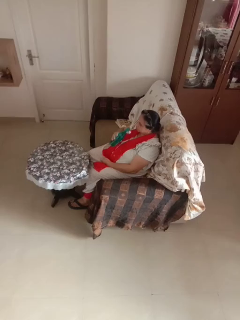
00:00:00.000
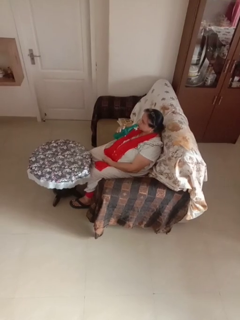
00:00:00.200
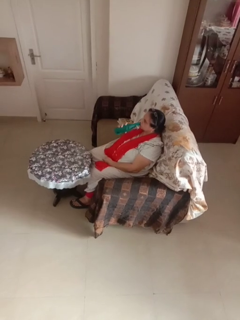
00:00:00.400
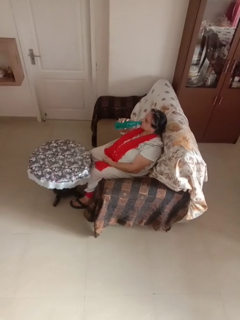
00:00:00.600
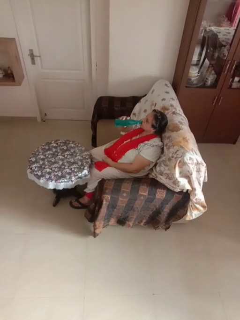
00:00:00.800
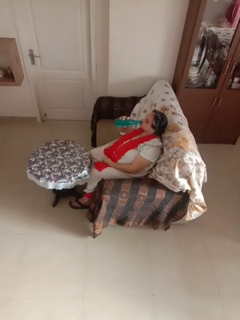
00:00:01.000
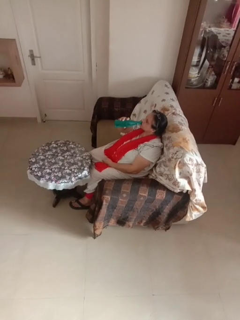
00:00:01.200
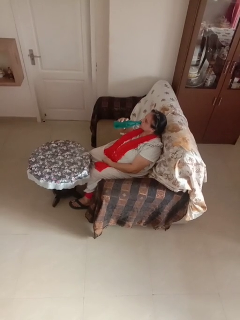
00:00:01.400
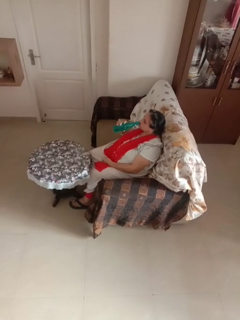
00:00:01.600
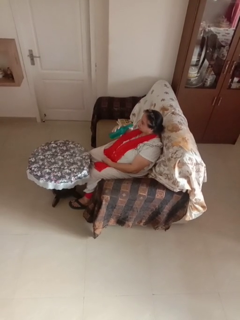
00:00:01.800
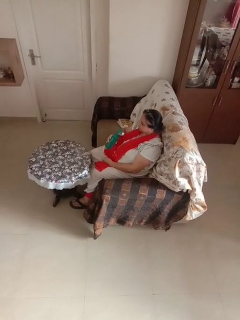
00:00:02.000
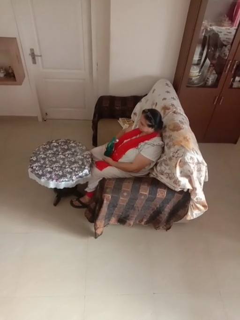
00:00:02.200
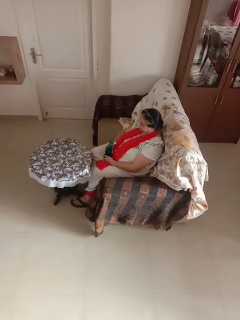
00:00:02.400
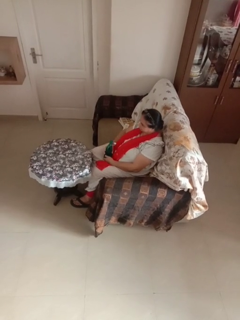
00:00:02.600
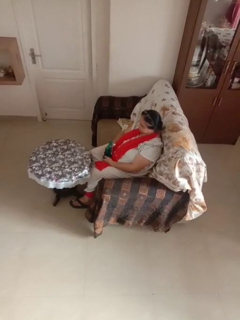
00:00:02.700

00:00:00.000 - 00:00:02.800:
person drinks from bottle

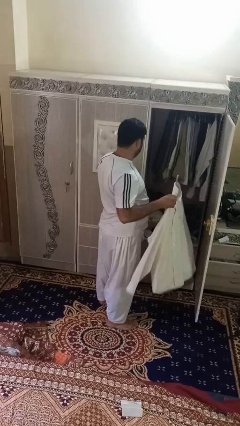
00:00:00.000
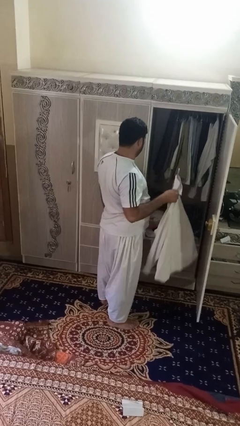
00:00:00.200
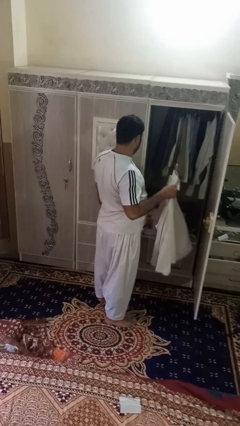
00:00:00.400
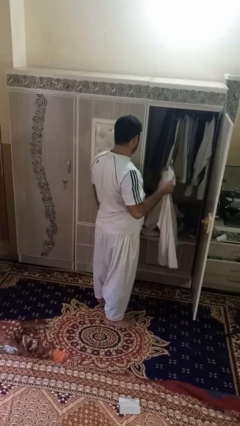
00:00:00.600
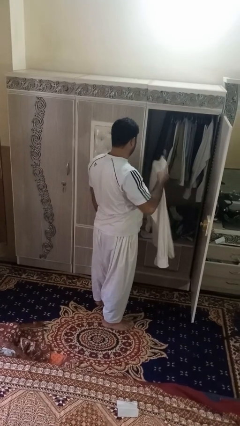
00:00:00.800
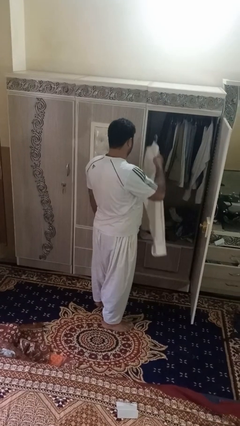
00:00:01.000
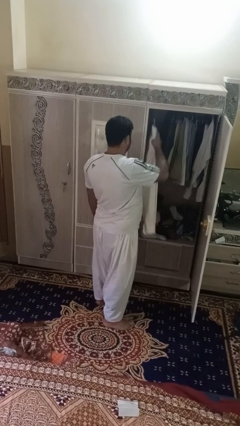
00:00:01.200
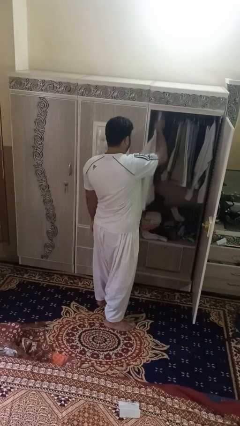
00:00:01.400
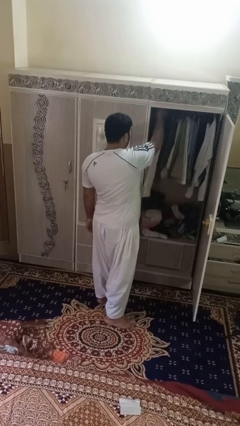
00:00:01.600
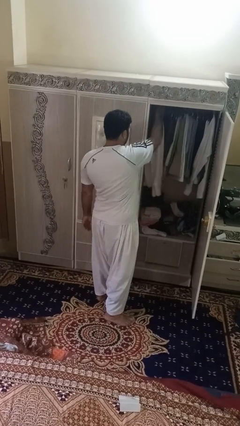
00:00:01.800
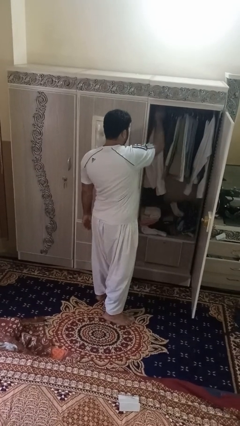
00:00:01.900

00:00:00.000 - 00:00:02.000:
person puts clothes into closet

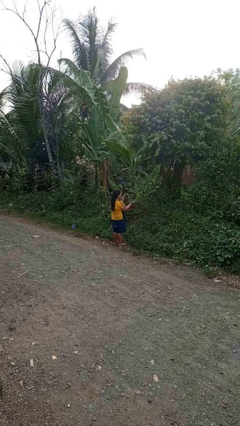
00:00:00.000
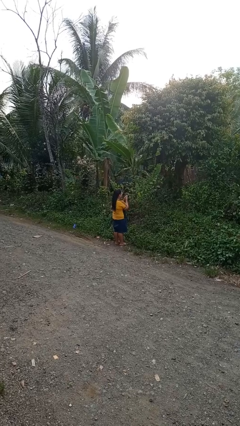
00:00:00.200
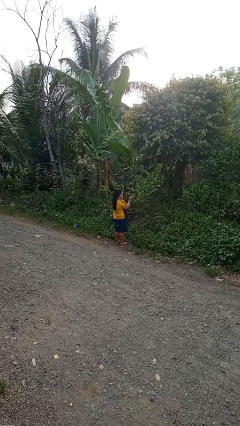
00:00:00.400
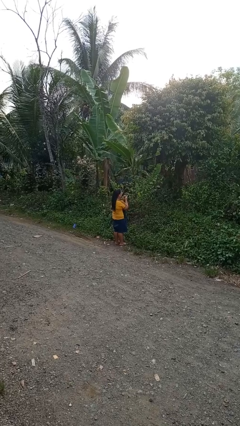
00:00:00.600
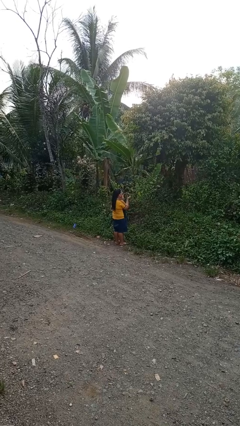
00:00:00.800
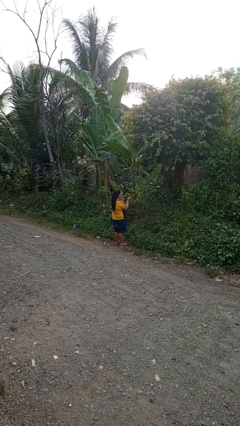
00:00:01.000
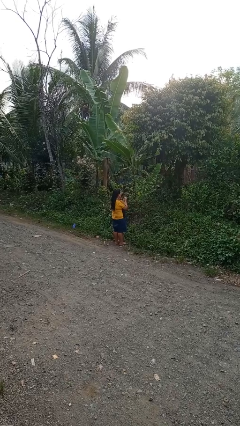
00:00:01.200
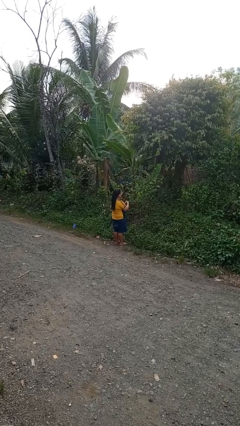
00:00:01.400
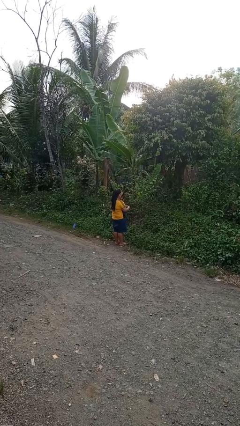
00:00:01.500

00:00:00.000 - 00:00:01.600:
person claps hands

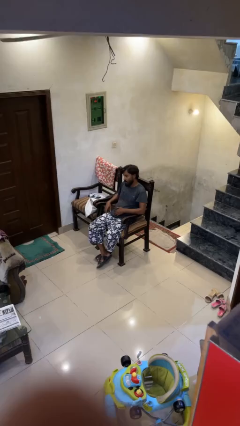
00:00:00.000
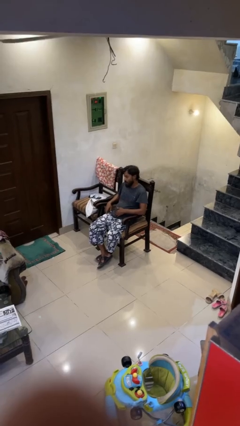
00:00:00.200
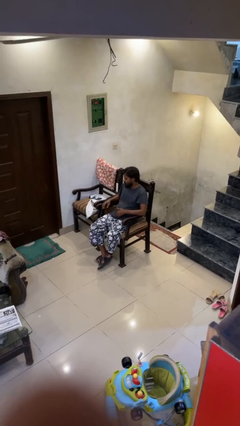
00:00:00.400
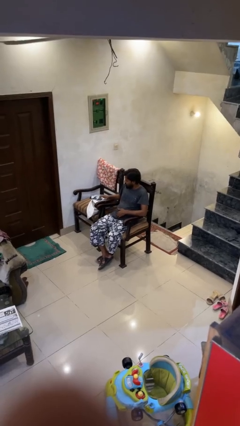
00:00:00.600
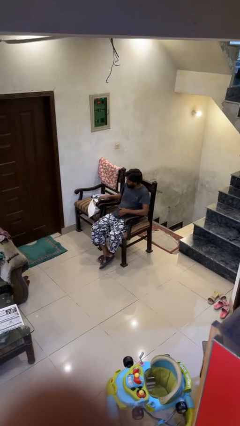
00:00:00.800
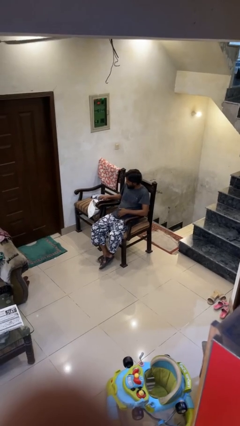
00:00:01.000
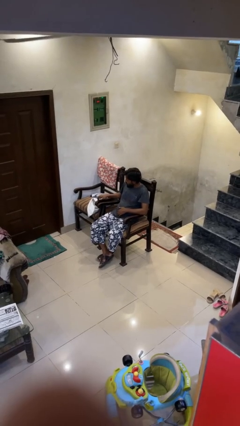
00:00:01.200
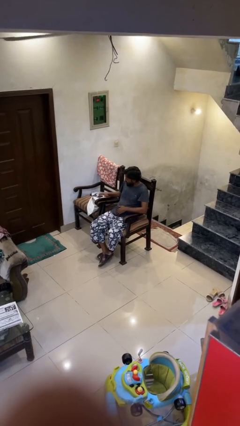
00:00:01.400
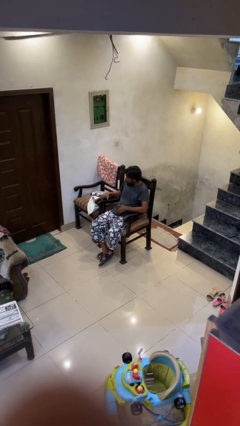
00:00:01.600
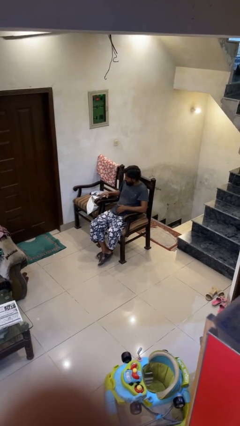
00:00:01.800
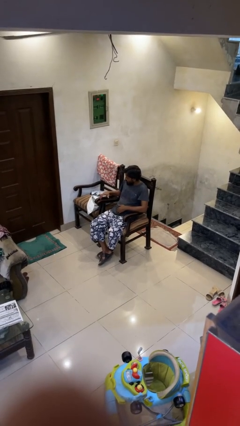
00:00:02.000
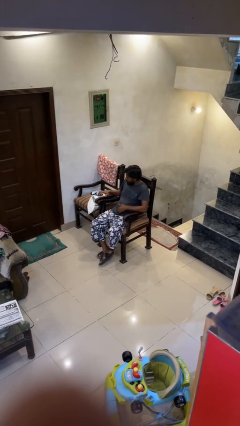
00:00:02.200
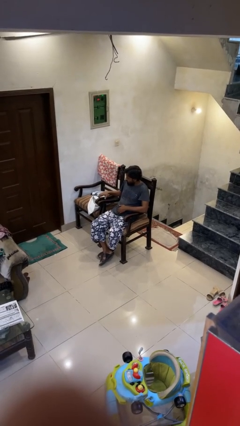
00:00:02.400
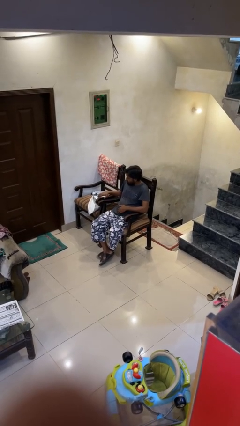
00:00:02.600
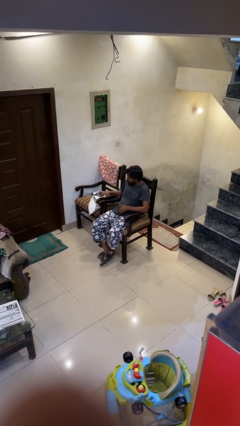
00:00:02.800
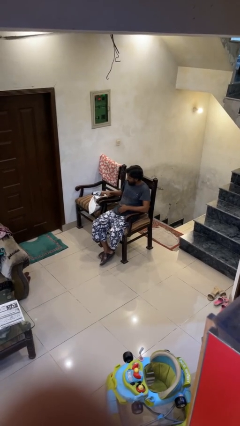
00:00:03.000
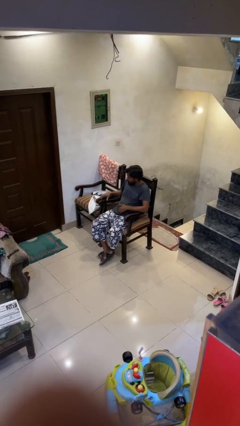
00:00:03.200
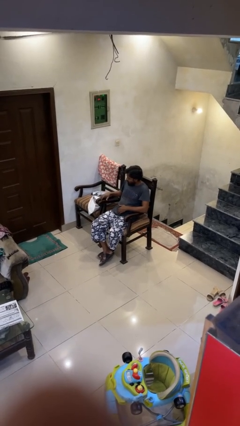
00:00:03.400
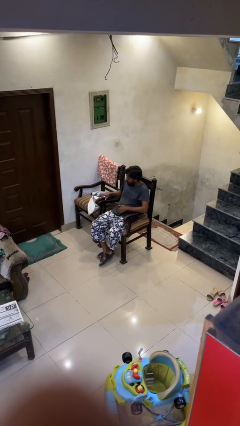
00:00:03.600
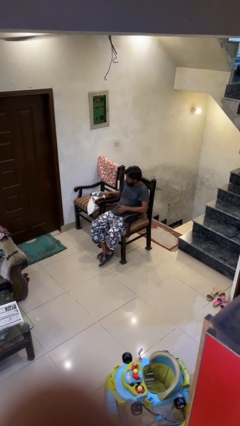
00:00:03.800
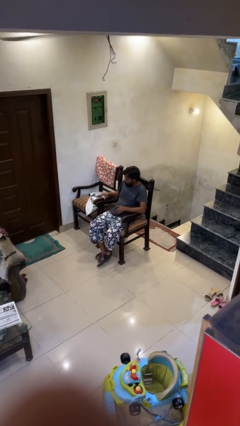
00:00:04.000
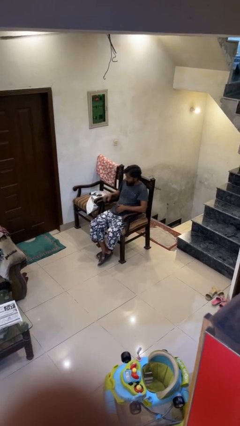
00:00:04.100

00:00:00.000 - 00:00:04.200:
person taps object with finger

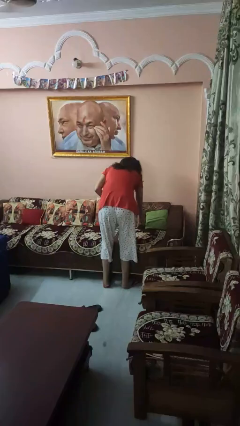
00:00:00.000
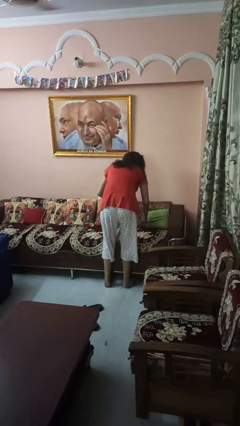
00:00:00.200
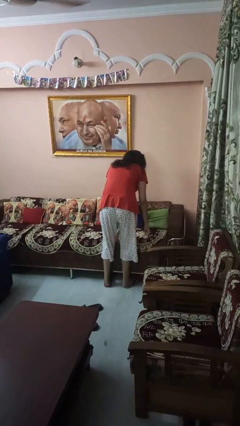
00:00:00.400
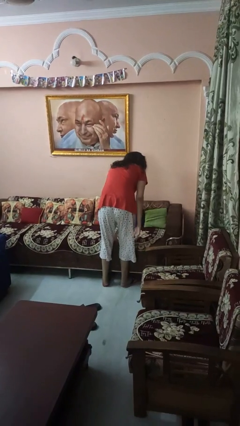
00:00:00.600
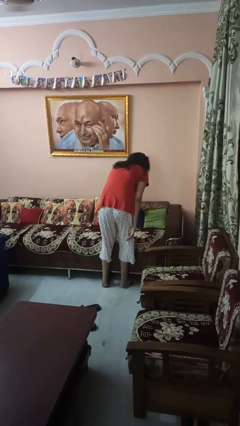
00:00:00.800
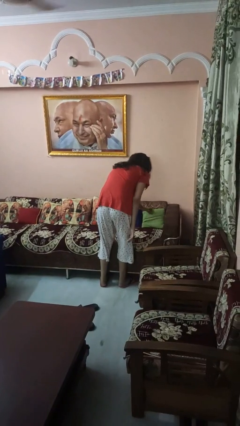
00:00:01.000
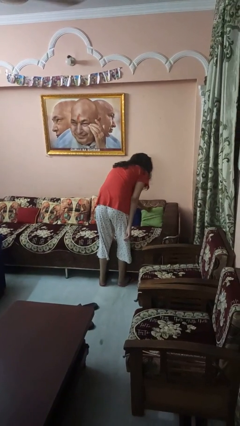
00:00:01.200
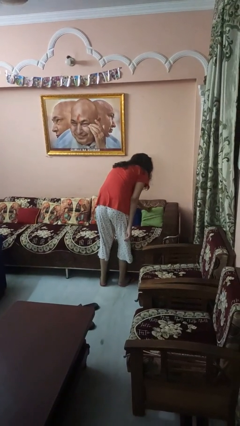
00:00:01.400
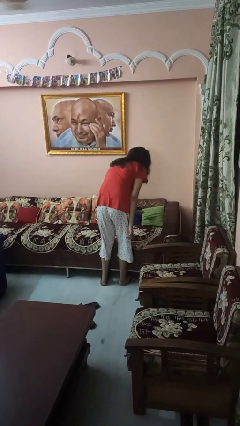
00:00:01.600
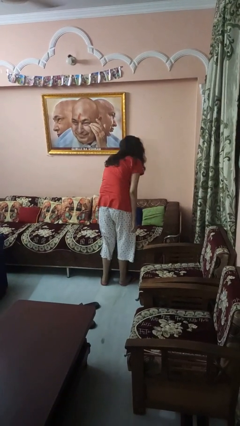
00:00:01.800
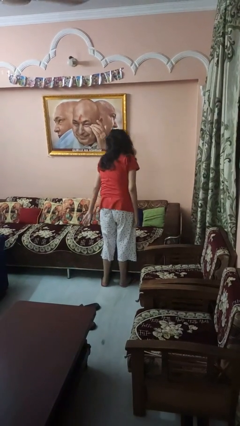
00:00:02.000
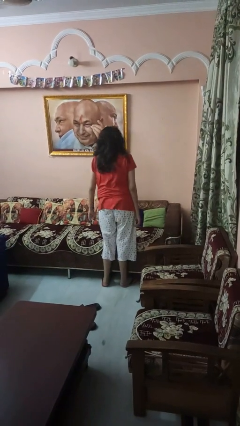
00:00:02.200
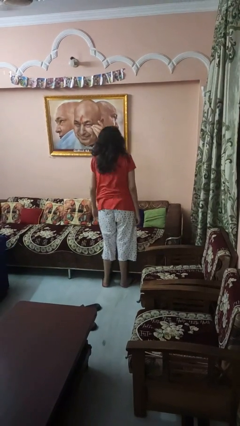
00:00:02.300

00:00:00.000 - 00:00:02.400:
person searches in couch

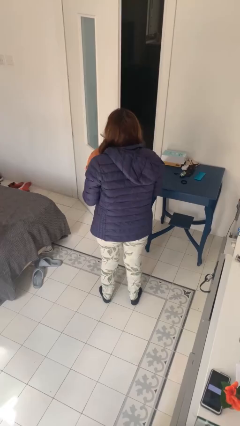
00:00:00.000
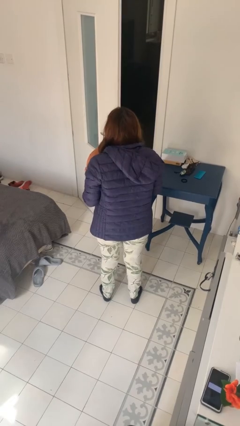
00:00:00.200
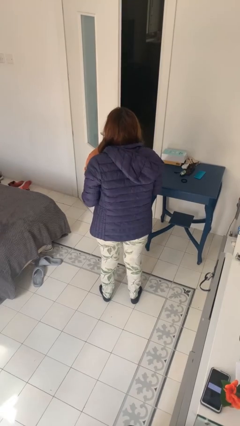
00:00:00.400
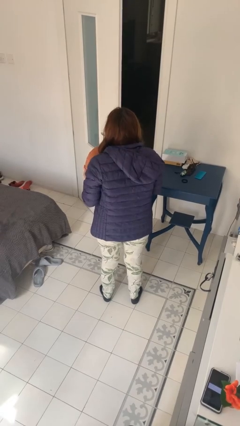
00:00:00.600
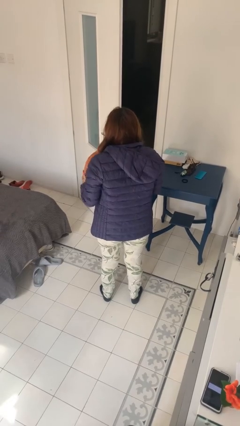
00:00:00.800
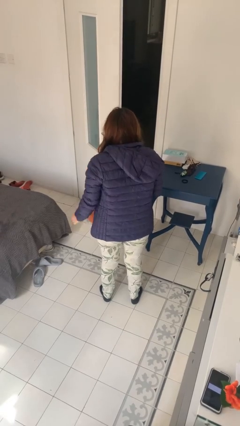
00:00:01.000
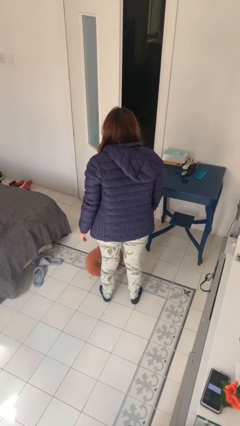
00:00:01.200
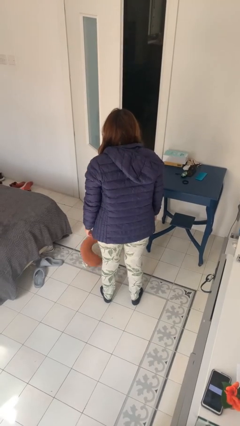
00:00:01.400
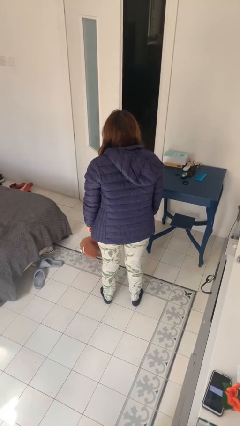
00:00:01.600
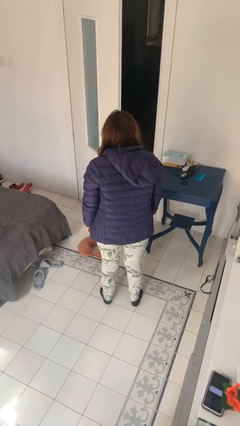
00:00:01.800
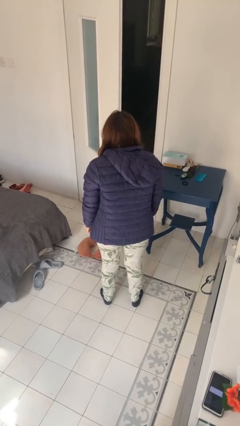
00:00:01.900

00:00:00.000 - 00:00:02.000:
person throws object into air

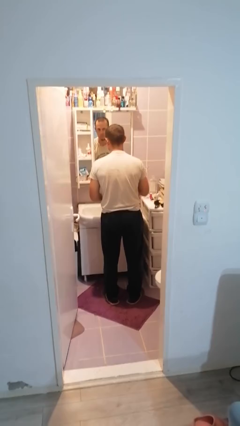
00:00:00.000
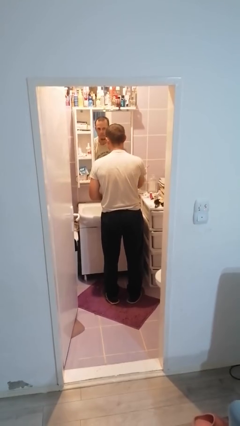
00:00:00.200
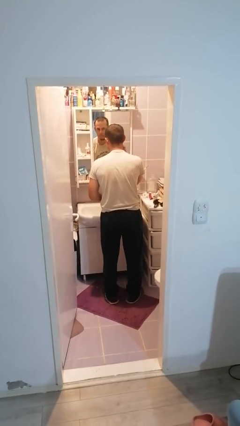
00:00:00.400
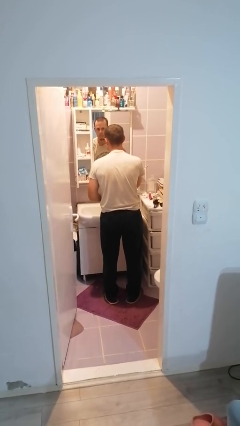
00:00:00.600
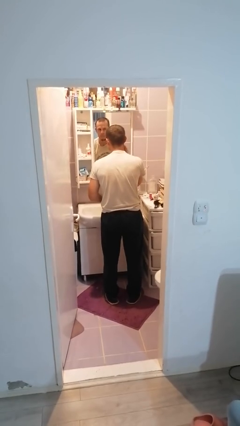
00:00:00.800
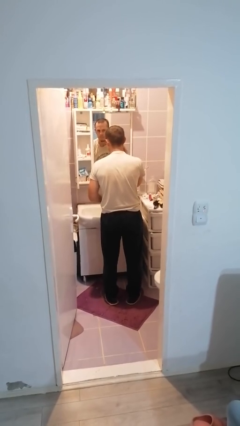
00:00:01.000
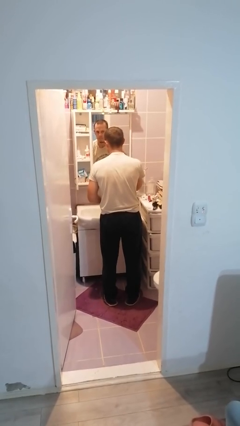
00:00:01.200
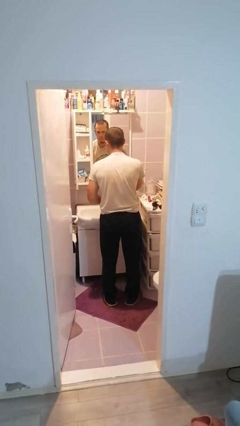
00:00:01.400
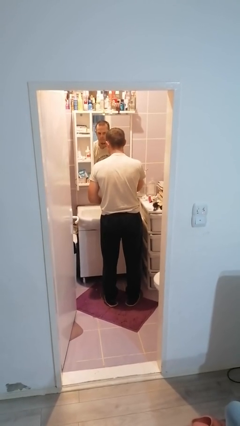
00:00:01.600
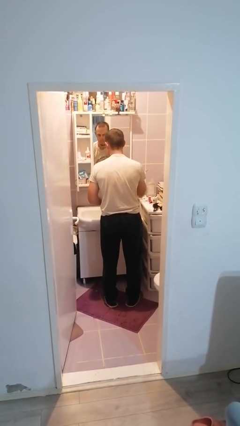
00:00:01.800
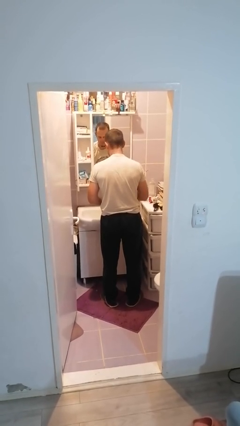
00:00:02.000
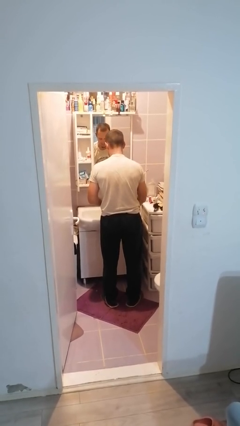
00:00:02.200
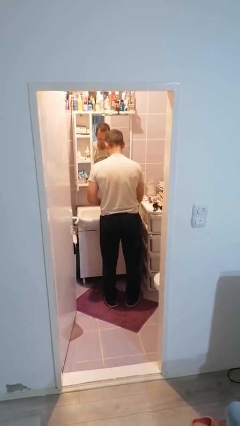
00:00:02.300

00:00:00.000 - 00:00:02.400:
person applies shaving cream

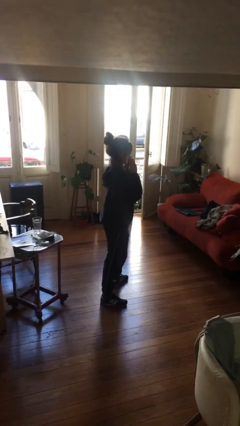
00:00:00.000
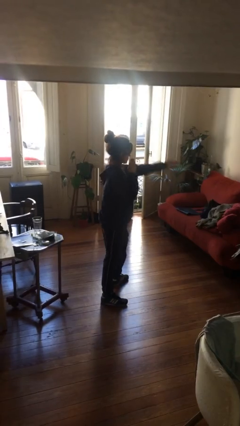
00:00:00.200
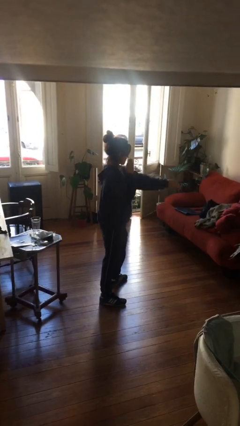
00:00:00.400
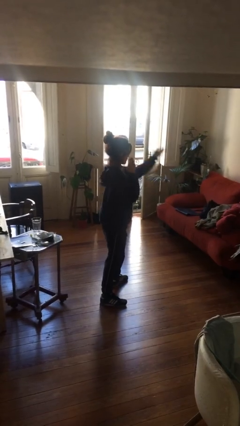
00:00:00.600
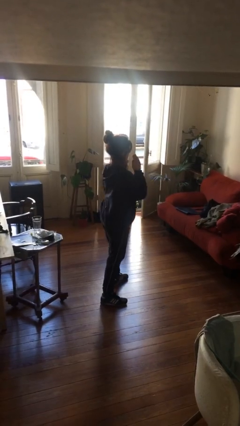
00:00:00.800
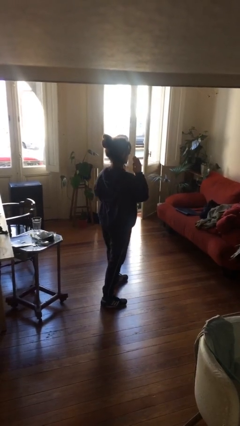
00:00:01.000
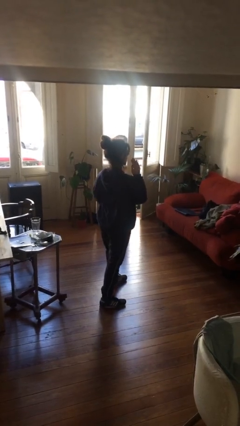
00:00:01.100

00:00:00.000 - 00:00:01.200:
person karate chop
